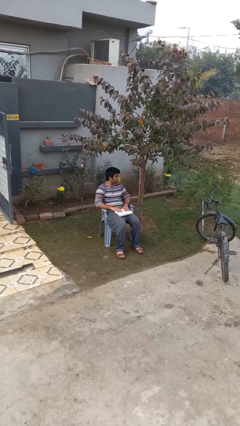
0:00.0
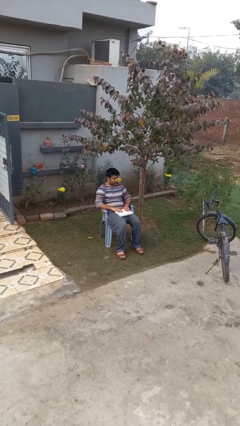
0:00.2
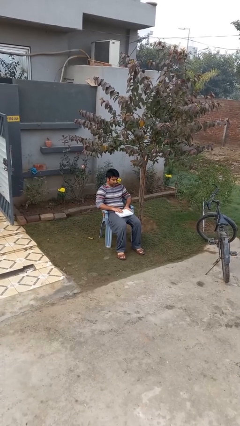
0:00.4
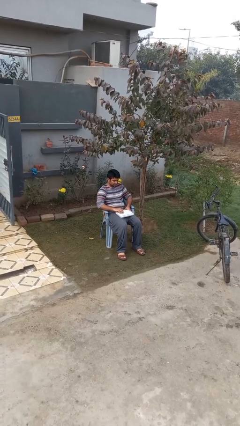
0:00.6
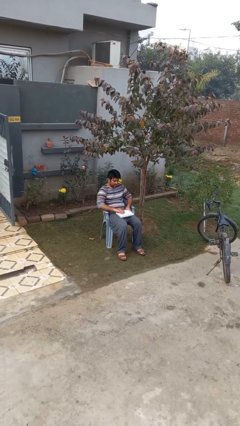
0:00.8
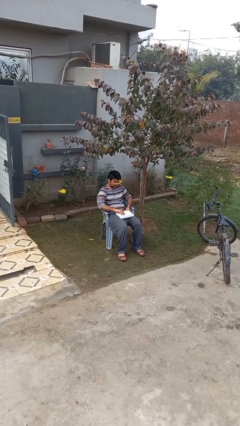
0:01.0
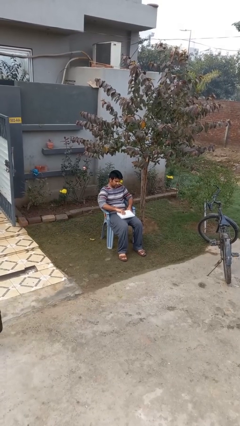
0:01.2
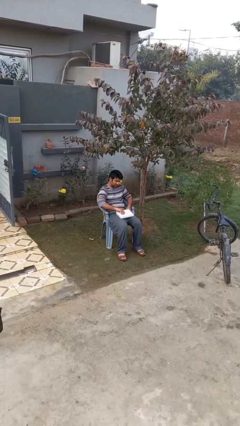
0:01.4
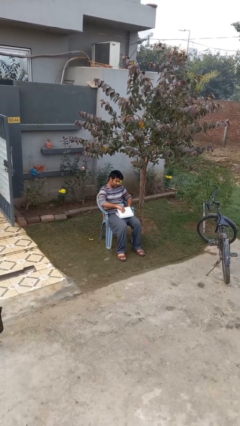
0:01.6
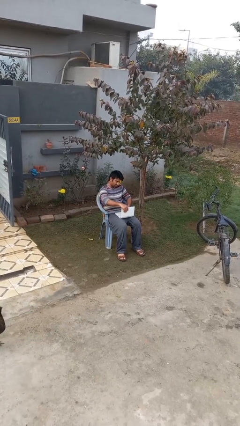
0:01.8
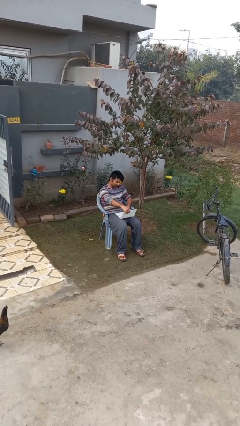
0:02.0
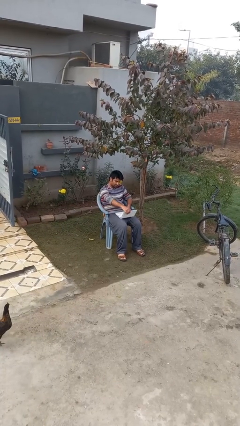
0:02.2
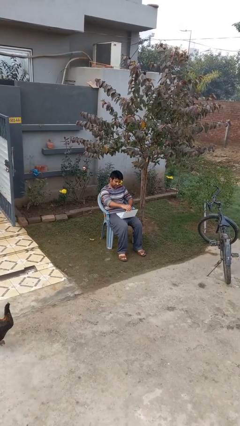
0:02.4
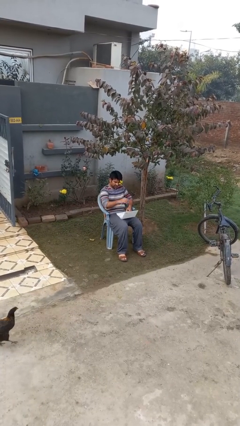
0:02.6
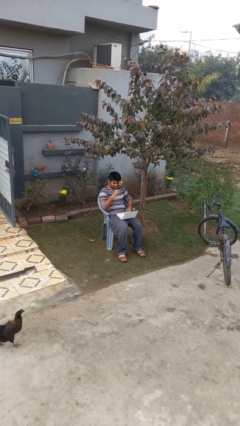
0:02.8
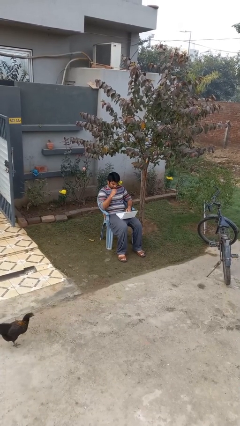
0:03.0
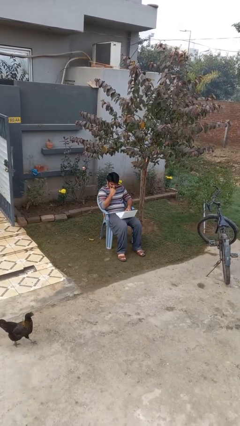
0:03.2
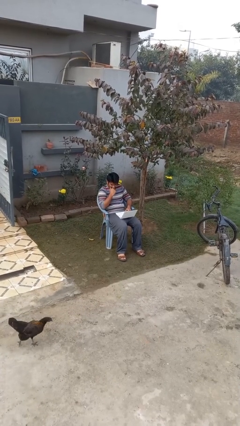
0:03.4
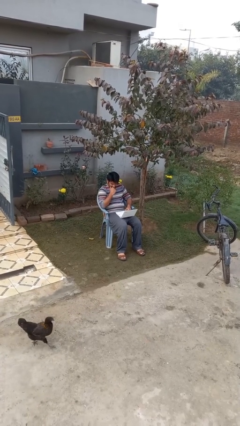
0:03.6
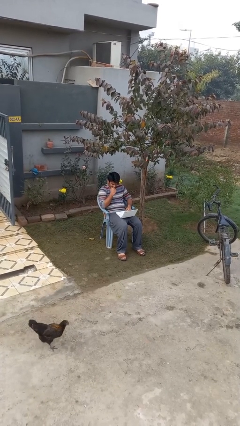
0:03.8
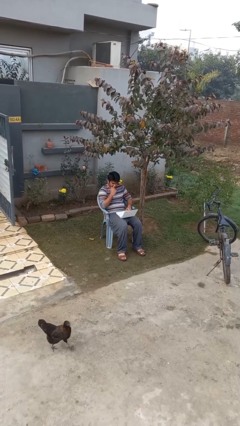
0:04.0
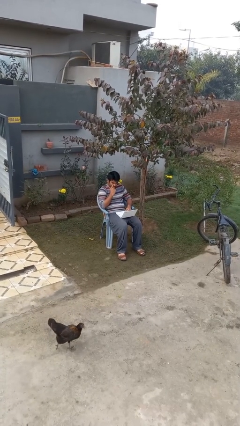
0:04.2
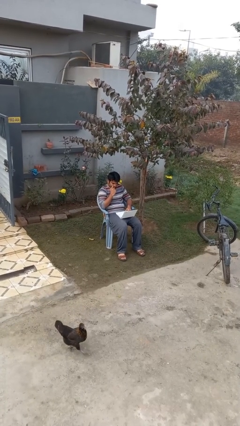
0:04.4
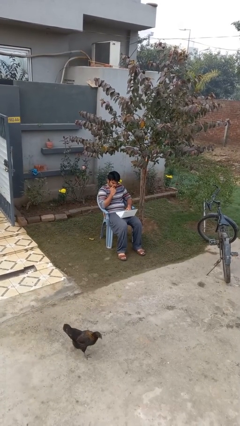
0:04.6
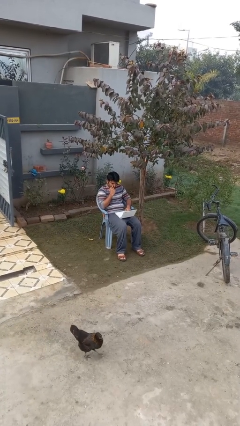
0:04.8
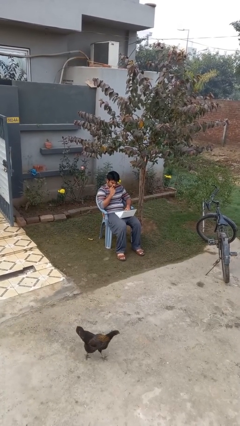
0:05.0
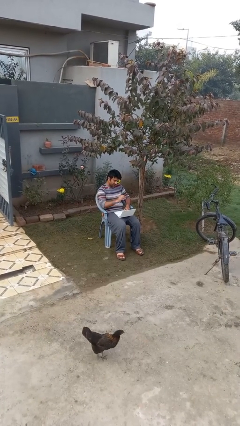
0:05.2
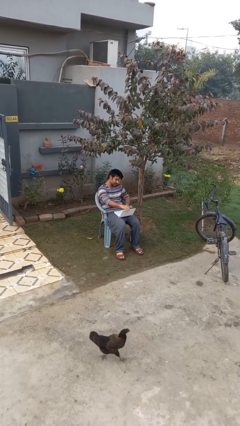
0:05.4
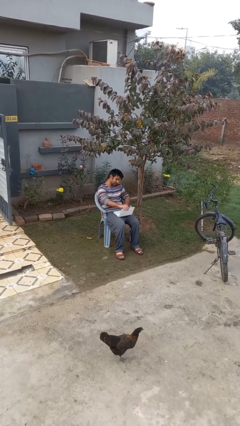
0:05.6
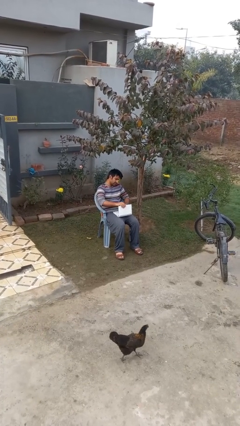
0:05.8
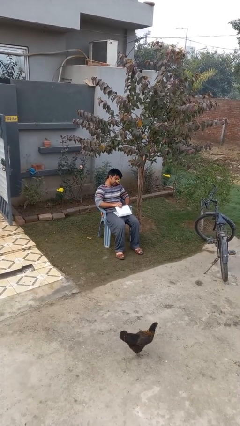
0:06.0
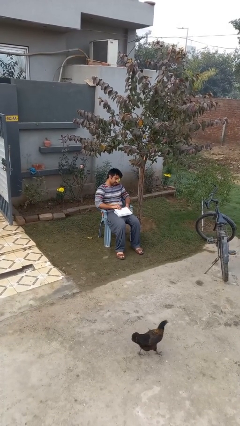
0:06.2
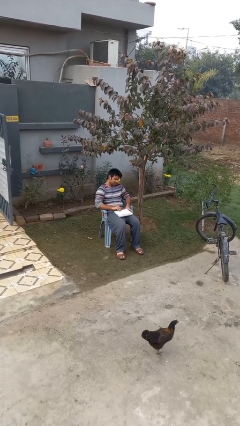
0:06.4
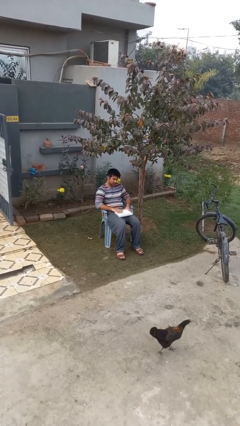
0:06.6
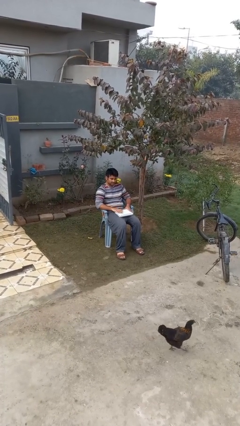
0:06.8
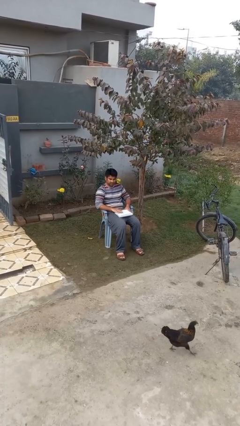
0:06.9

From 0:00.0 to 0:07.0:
person interacts with laptop

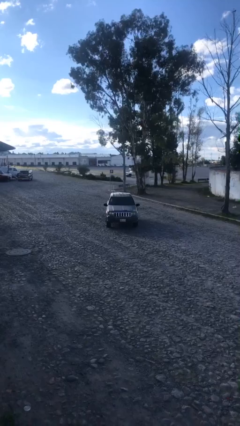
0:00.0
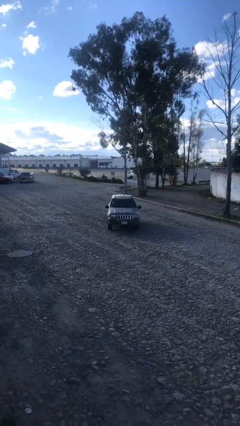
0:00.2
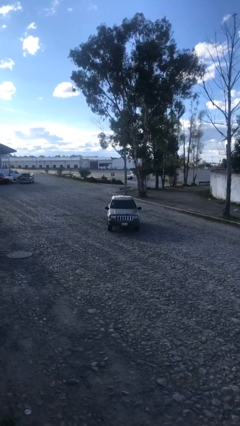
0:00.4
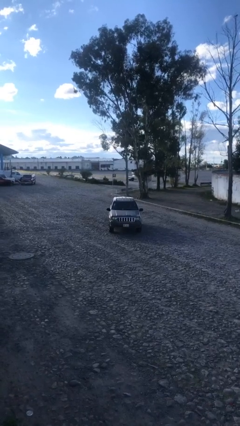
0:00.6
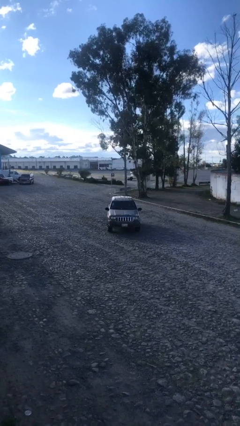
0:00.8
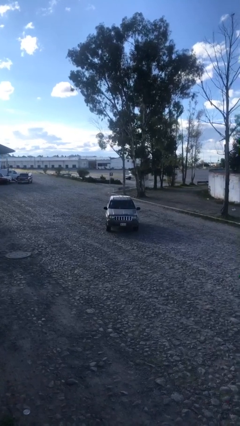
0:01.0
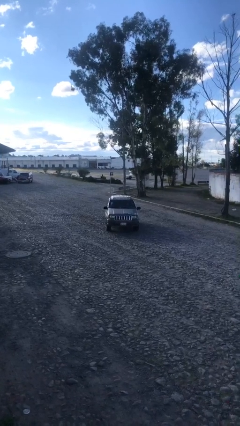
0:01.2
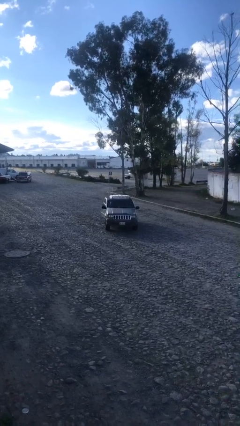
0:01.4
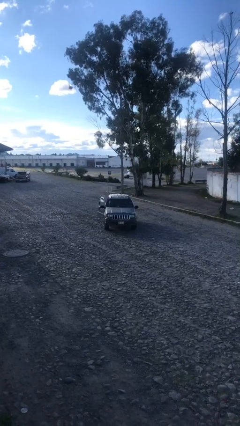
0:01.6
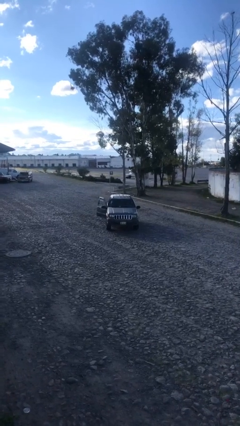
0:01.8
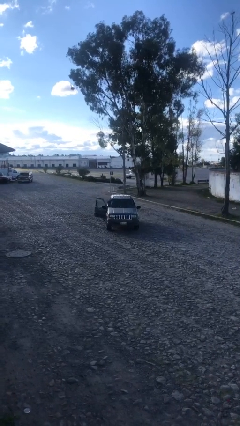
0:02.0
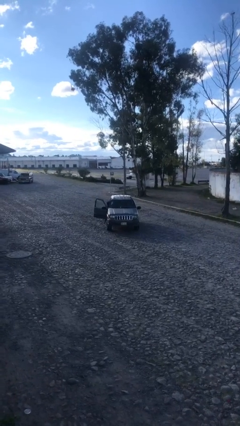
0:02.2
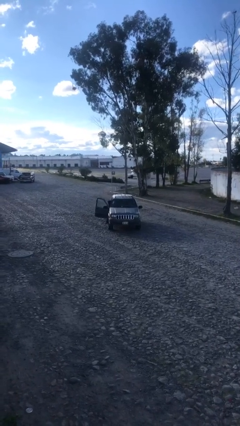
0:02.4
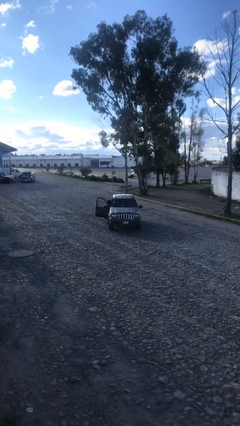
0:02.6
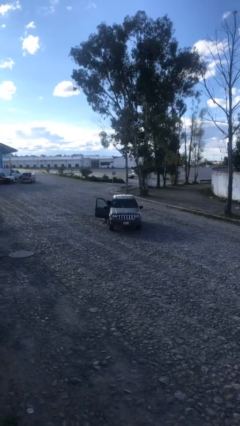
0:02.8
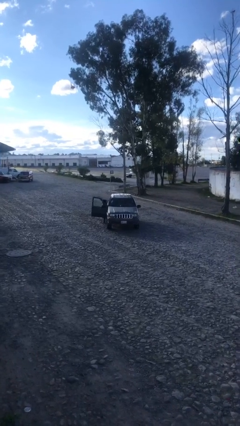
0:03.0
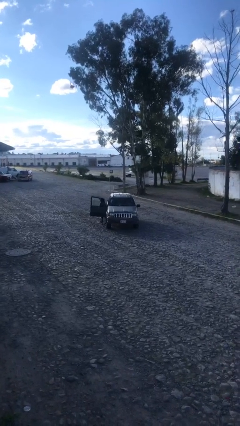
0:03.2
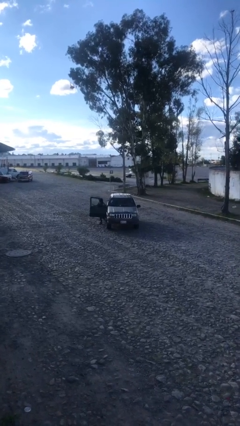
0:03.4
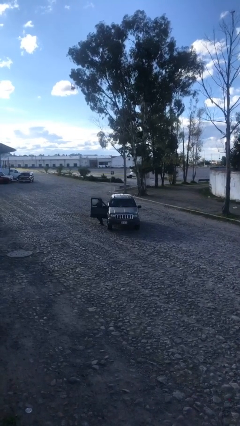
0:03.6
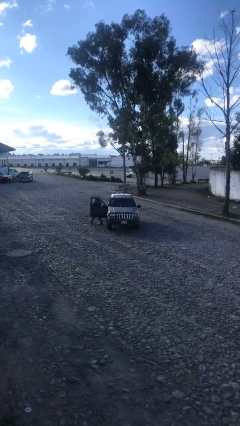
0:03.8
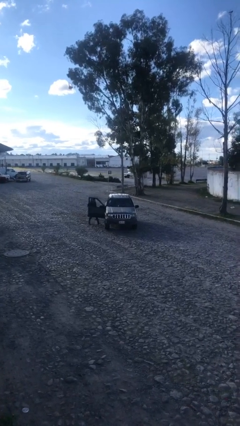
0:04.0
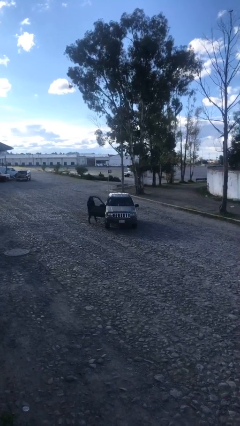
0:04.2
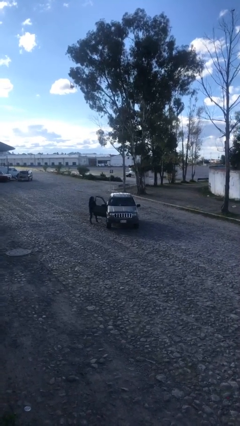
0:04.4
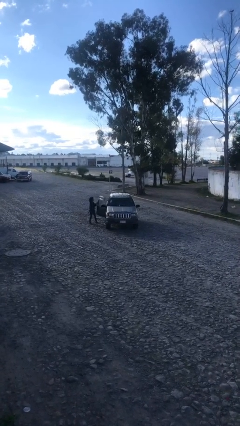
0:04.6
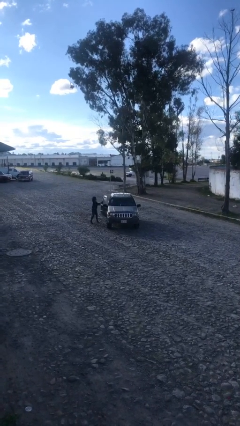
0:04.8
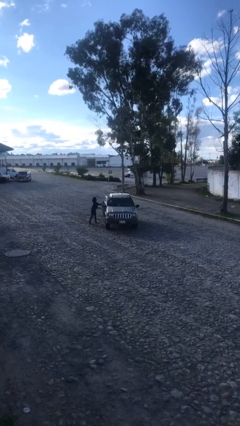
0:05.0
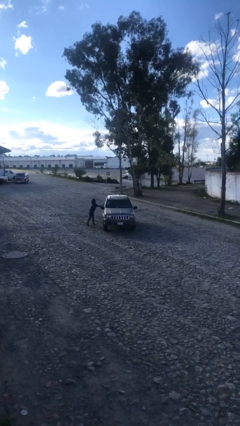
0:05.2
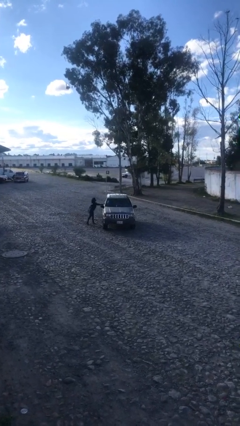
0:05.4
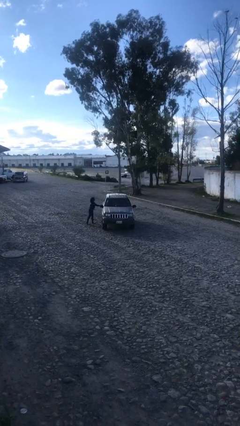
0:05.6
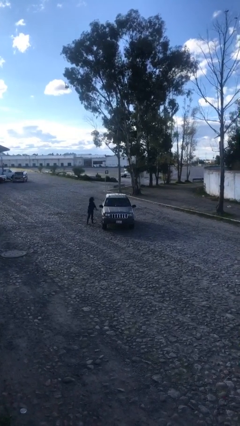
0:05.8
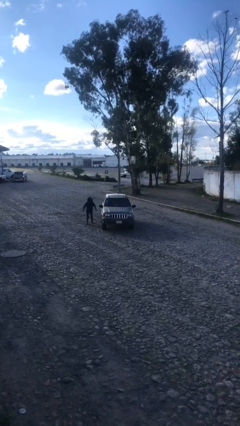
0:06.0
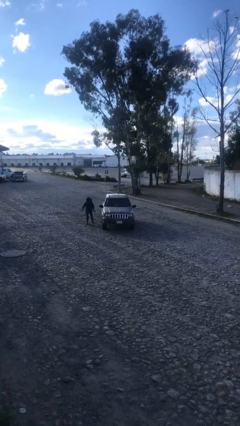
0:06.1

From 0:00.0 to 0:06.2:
car drops off person

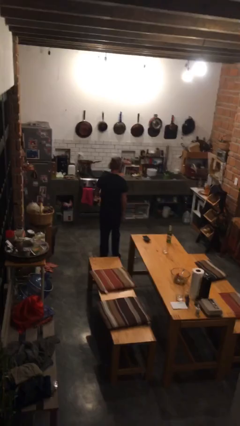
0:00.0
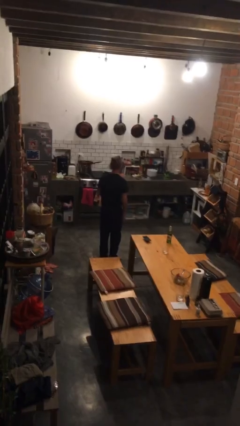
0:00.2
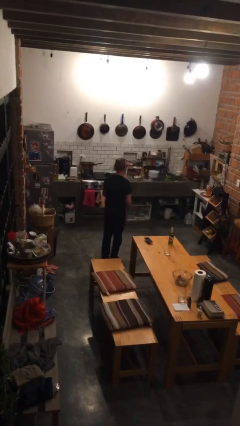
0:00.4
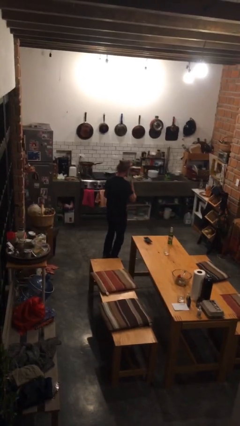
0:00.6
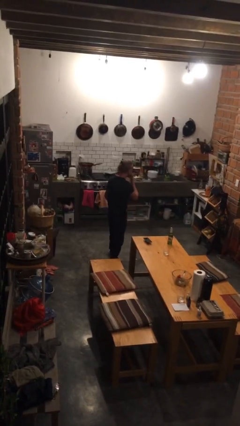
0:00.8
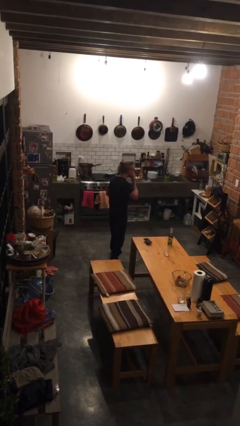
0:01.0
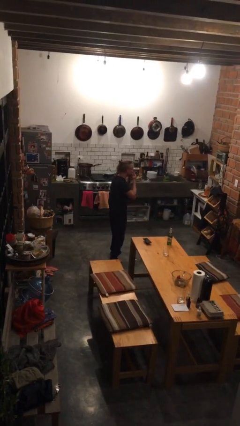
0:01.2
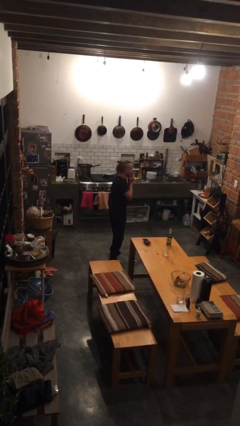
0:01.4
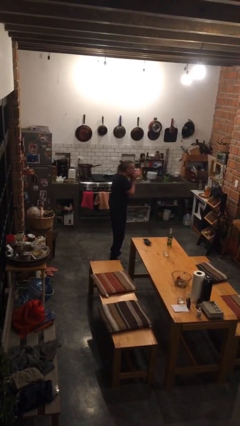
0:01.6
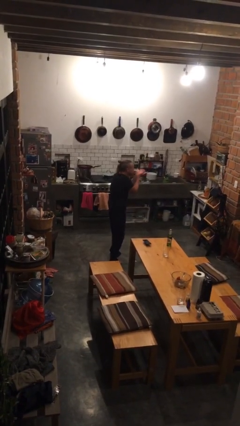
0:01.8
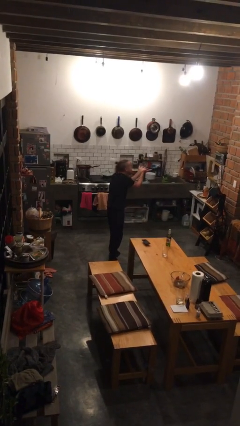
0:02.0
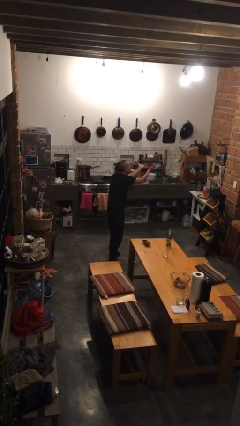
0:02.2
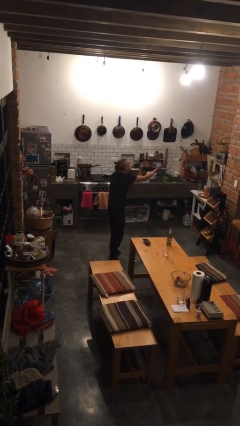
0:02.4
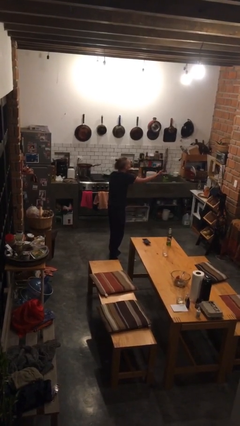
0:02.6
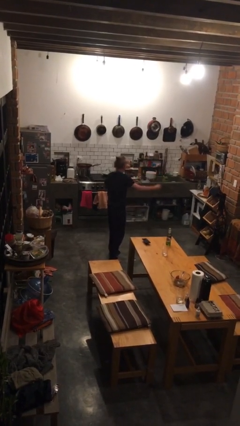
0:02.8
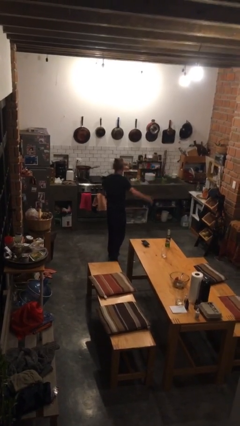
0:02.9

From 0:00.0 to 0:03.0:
person gestures blow kiss

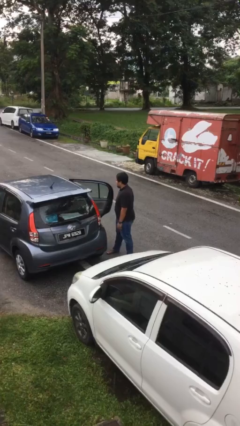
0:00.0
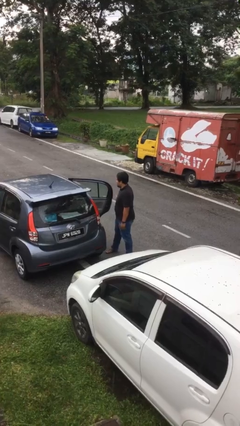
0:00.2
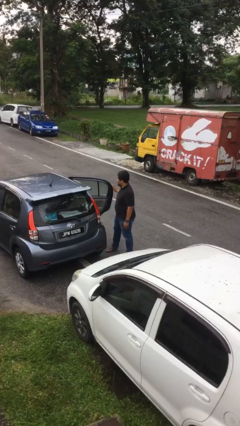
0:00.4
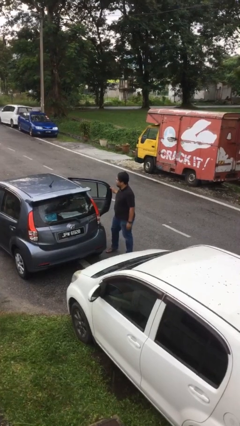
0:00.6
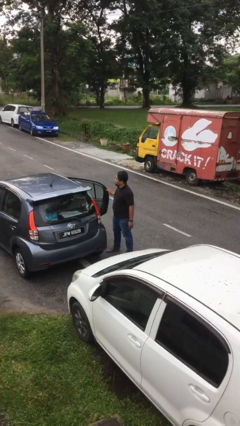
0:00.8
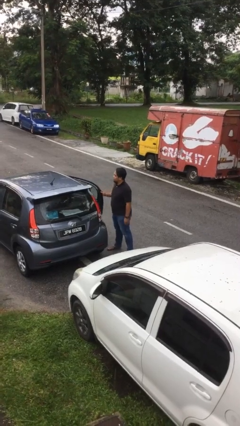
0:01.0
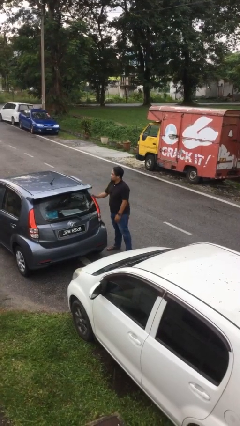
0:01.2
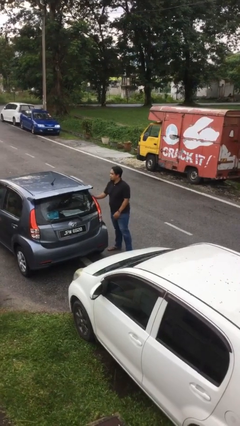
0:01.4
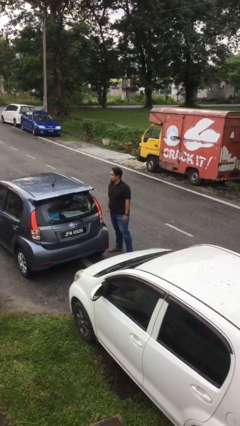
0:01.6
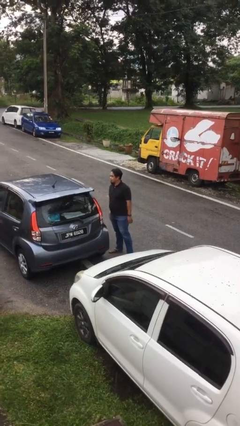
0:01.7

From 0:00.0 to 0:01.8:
person closes car door

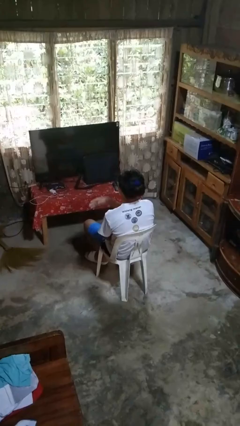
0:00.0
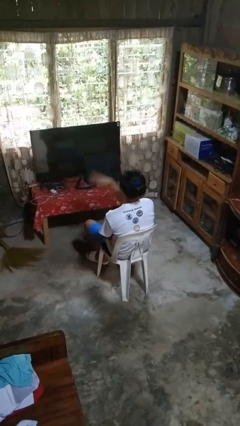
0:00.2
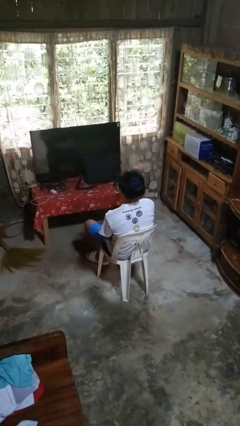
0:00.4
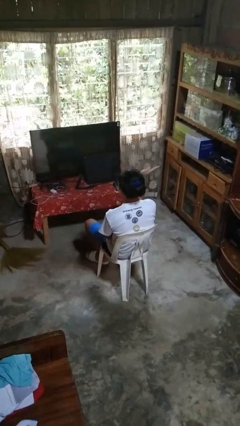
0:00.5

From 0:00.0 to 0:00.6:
person gestures swipe right
